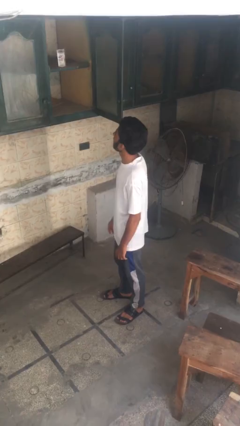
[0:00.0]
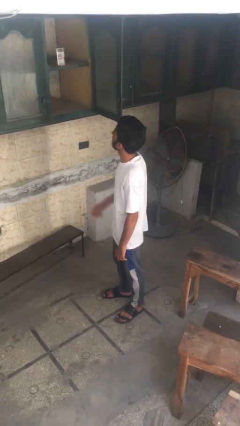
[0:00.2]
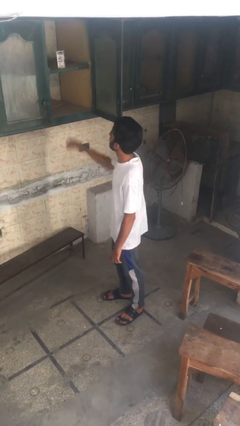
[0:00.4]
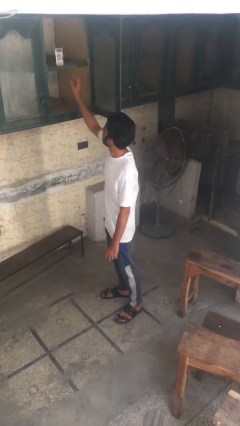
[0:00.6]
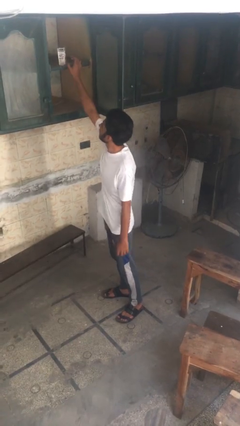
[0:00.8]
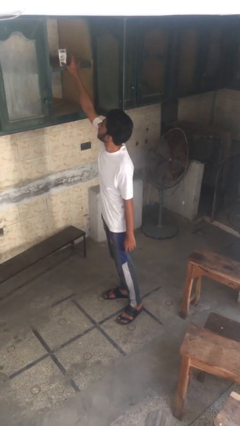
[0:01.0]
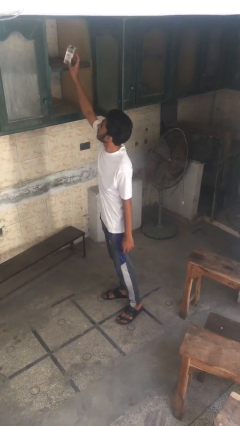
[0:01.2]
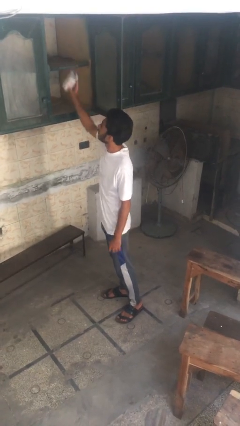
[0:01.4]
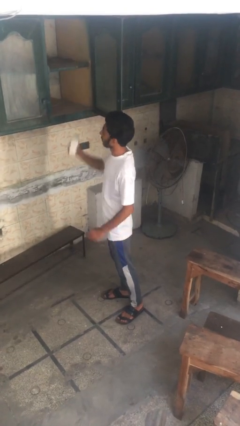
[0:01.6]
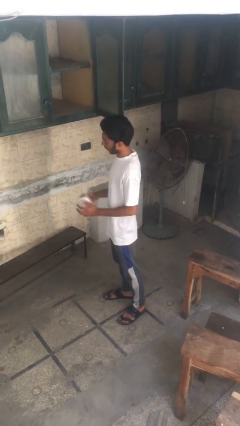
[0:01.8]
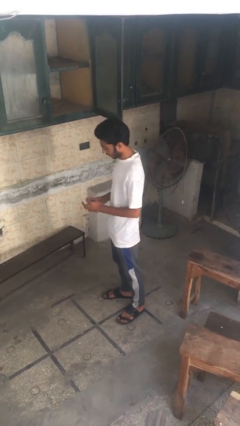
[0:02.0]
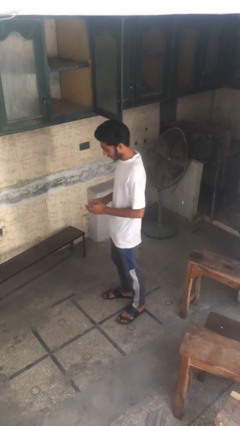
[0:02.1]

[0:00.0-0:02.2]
person takes object from cabinet

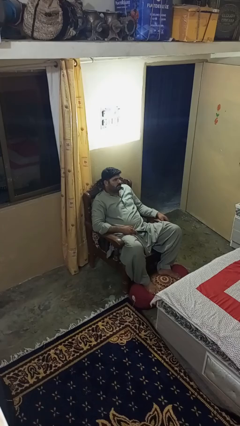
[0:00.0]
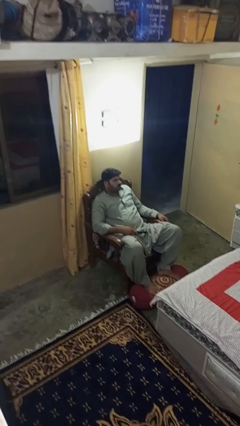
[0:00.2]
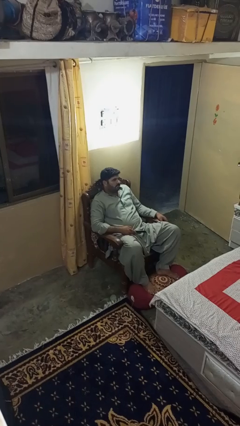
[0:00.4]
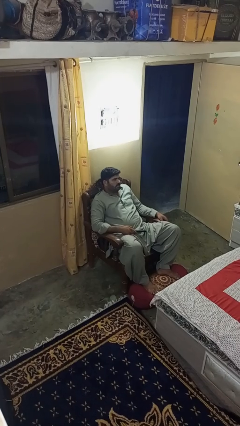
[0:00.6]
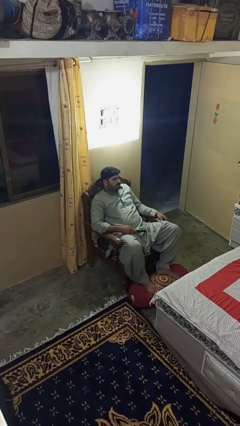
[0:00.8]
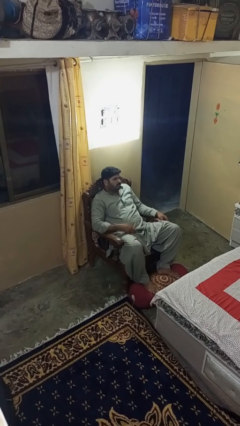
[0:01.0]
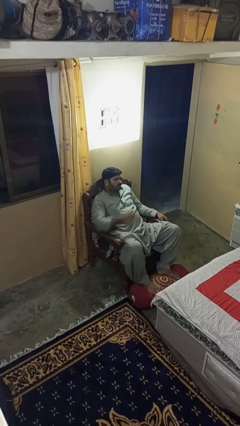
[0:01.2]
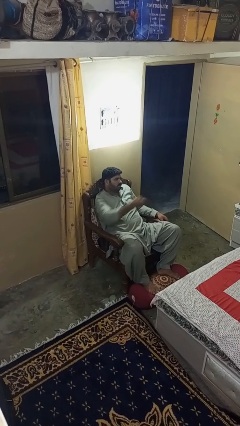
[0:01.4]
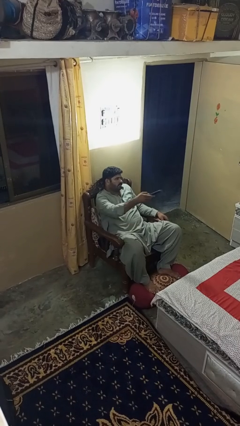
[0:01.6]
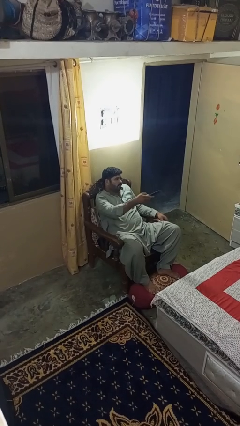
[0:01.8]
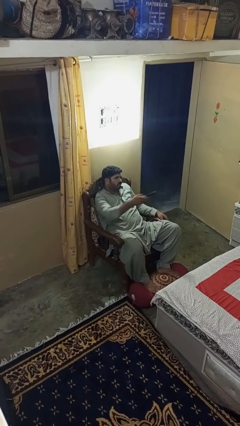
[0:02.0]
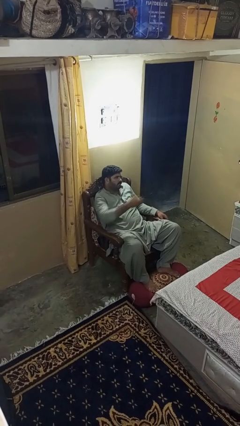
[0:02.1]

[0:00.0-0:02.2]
person uses television remote

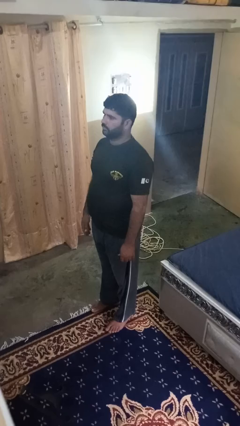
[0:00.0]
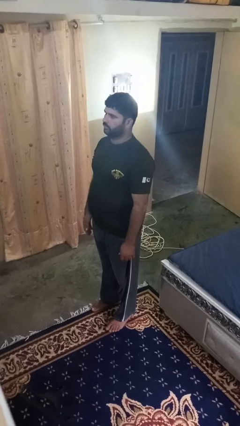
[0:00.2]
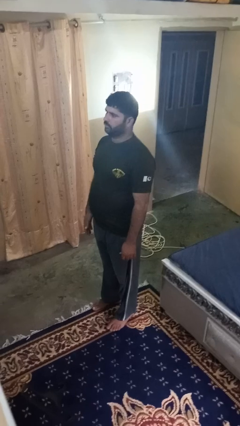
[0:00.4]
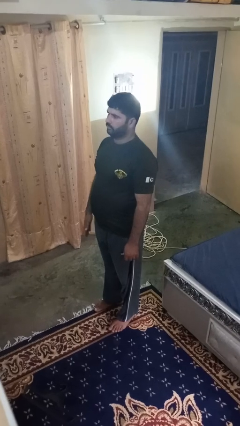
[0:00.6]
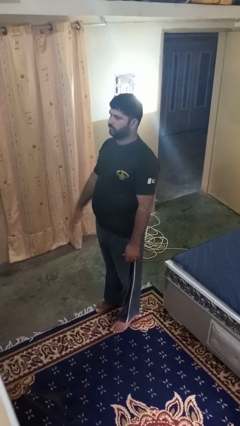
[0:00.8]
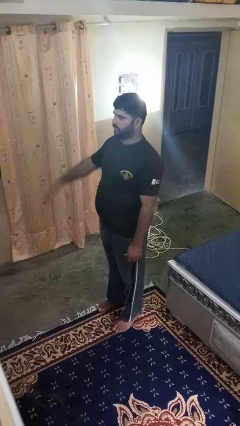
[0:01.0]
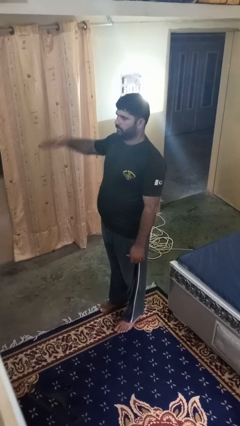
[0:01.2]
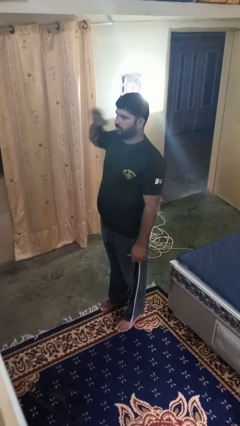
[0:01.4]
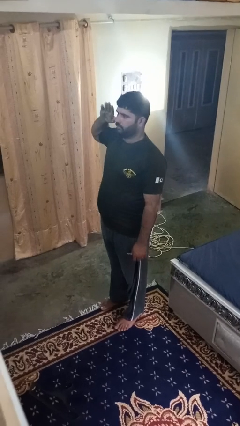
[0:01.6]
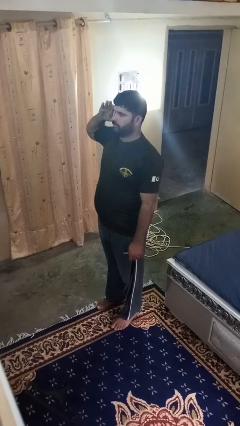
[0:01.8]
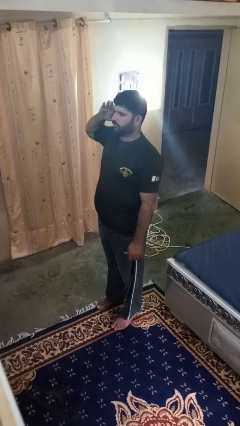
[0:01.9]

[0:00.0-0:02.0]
person salutes

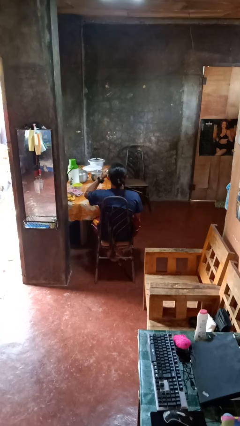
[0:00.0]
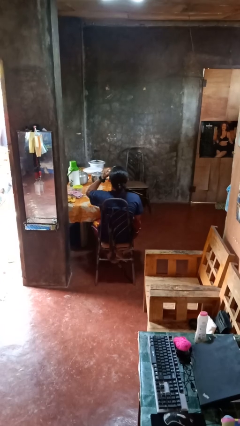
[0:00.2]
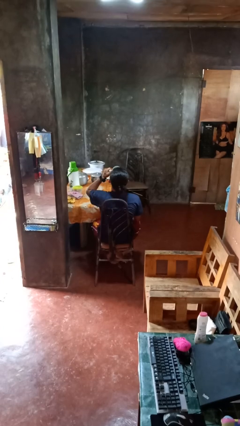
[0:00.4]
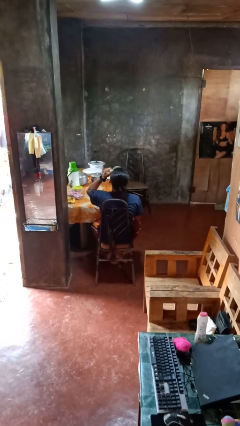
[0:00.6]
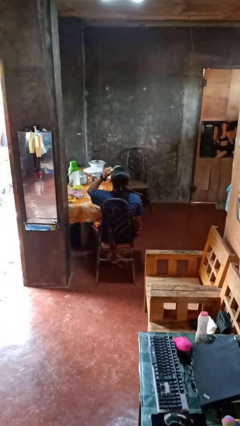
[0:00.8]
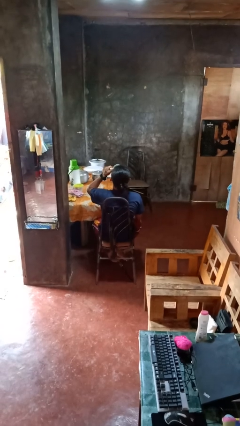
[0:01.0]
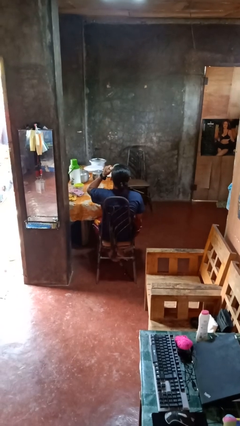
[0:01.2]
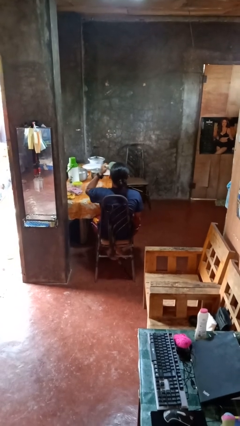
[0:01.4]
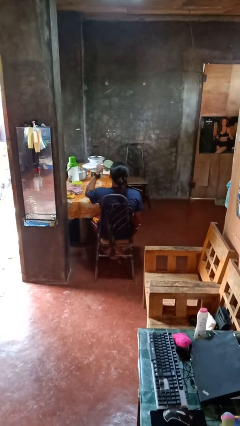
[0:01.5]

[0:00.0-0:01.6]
person drinks from mug

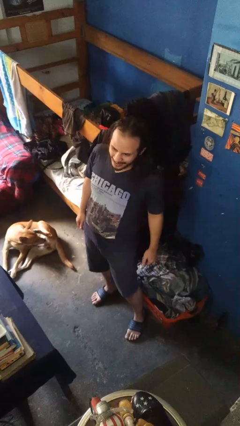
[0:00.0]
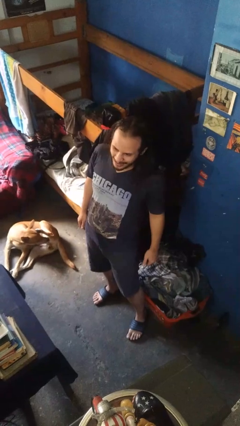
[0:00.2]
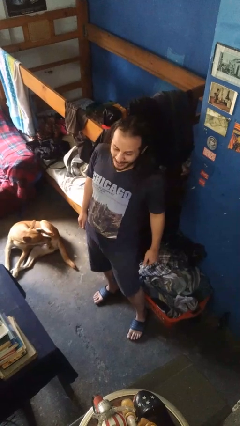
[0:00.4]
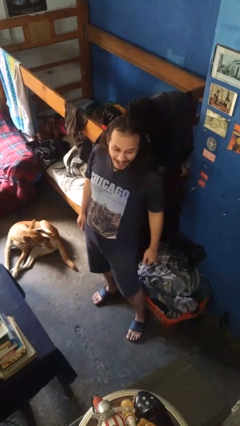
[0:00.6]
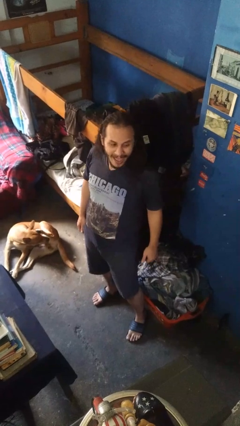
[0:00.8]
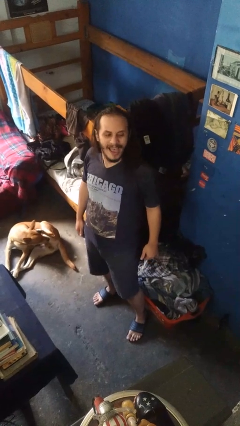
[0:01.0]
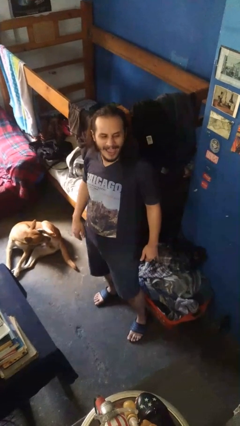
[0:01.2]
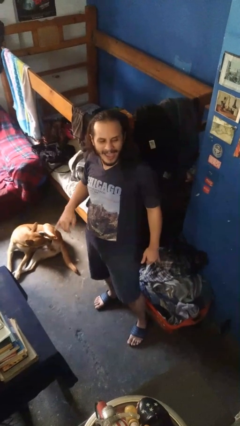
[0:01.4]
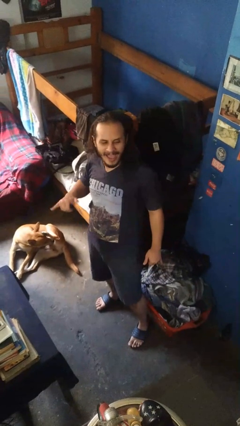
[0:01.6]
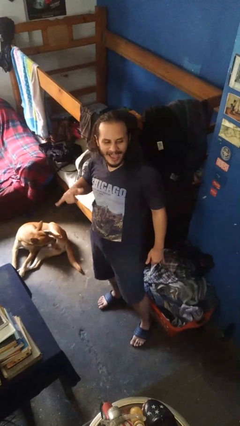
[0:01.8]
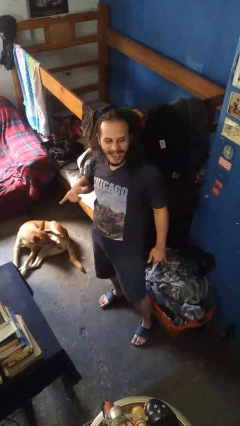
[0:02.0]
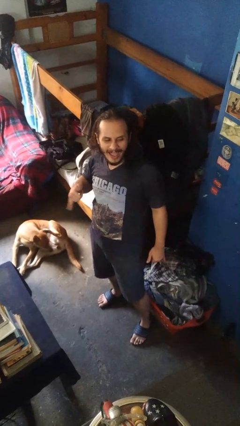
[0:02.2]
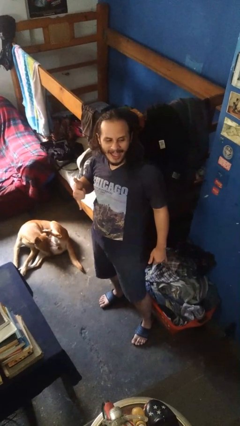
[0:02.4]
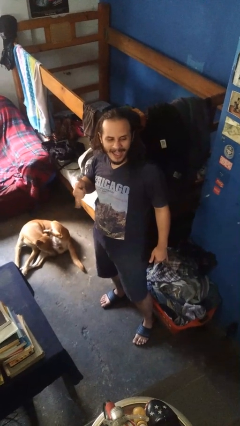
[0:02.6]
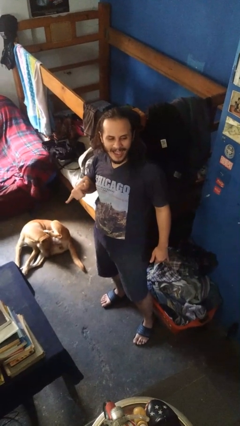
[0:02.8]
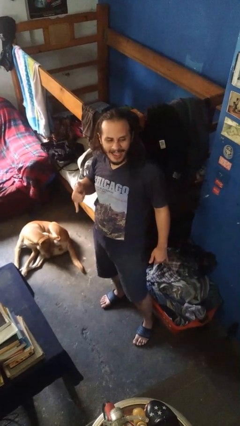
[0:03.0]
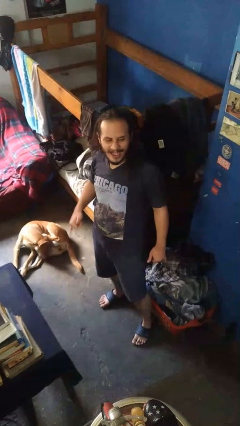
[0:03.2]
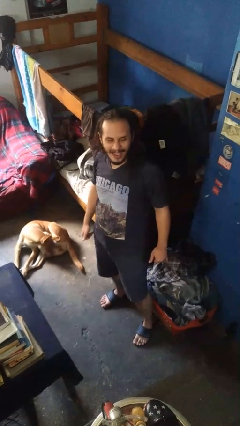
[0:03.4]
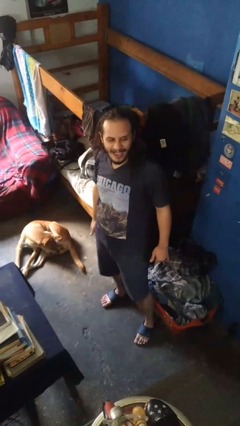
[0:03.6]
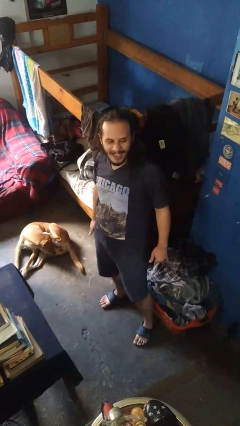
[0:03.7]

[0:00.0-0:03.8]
person gestures hang loose

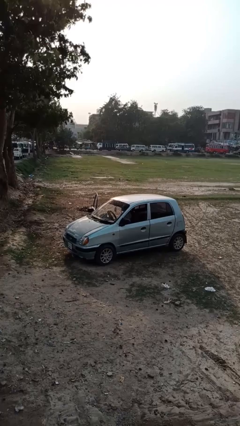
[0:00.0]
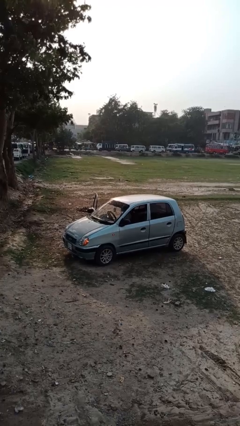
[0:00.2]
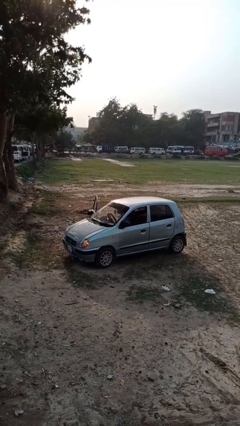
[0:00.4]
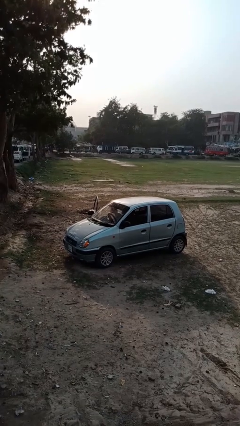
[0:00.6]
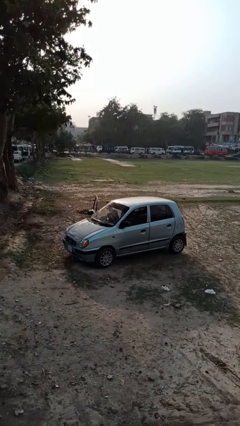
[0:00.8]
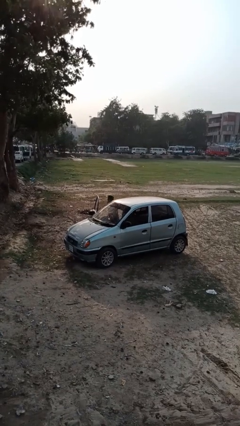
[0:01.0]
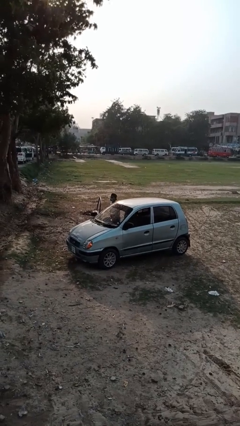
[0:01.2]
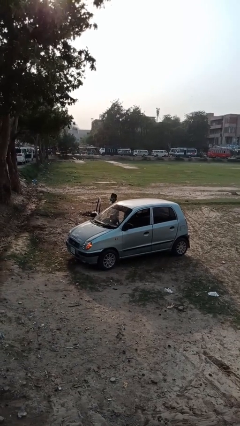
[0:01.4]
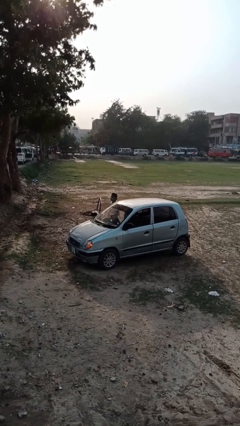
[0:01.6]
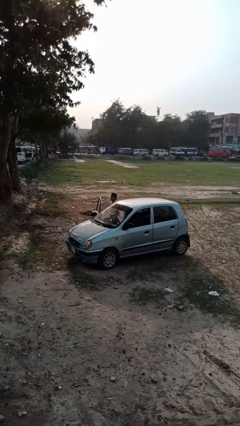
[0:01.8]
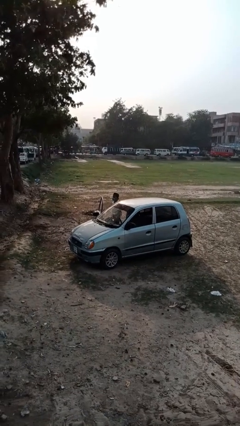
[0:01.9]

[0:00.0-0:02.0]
person exits car

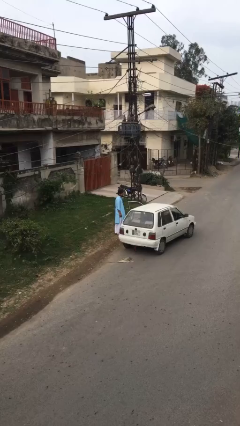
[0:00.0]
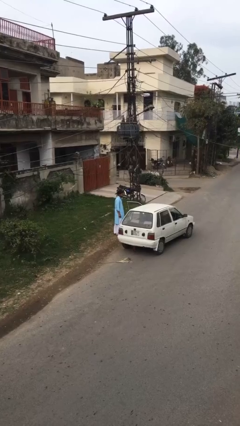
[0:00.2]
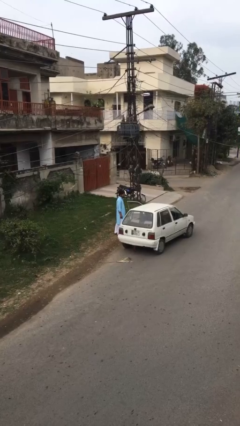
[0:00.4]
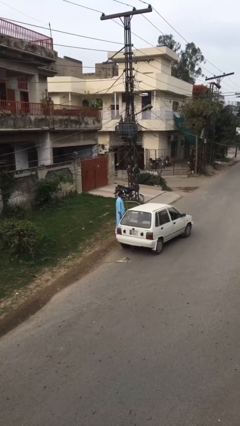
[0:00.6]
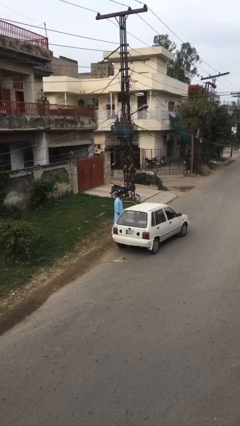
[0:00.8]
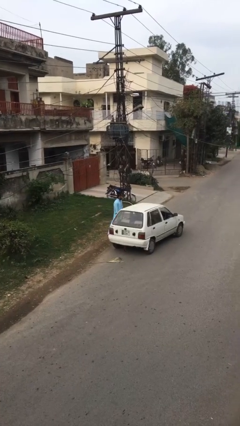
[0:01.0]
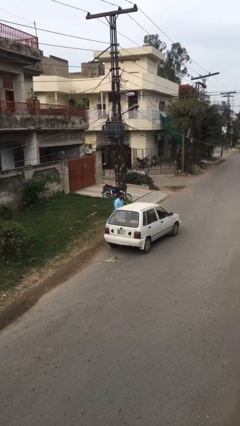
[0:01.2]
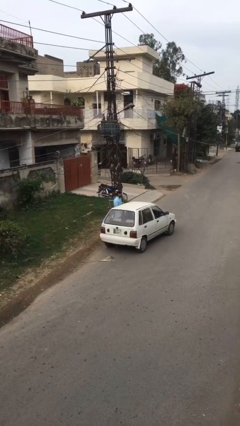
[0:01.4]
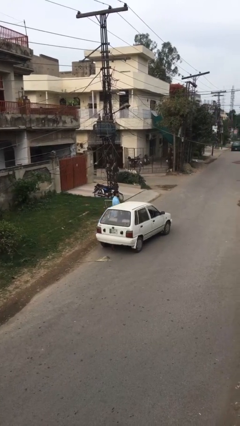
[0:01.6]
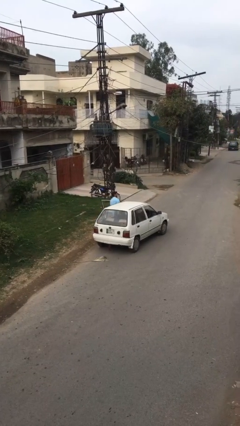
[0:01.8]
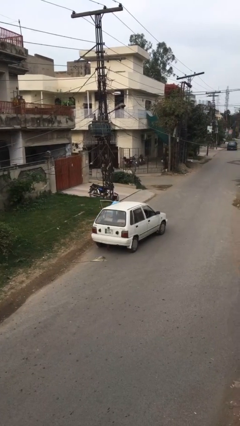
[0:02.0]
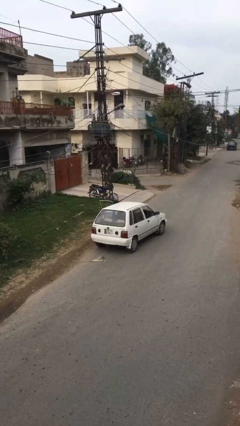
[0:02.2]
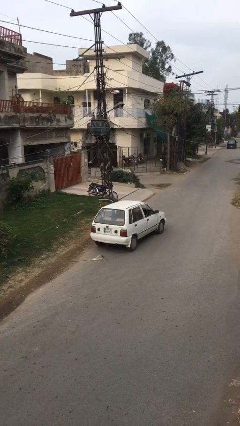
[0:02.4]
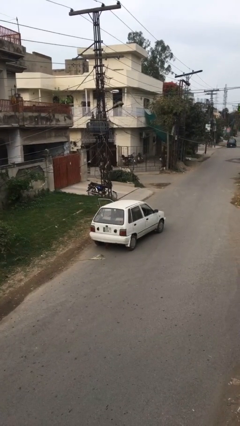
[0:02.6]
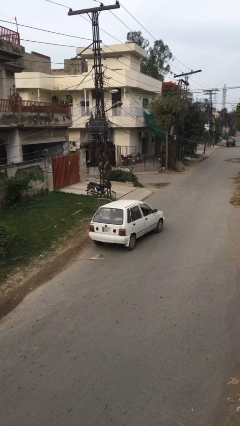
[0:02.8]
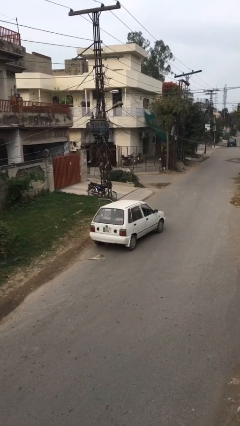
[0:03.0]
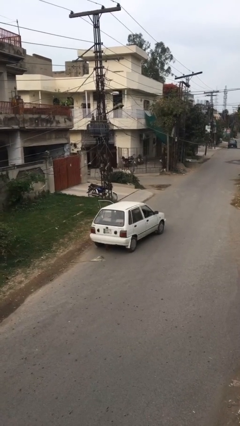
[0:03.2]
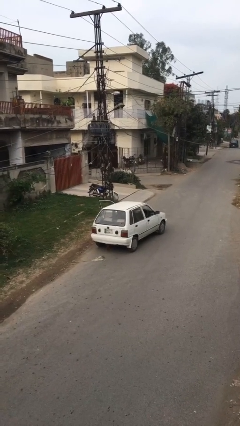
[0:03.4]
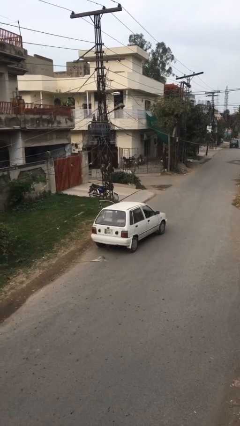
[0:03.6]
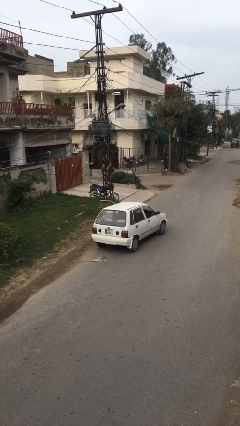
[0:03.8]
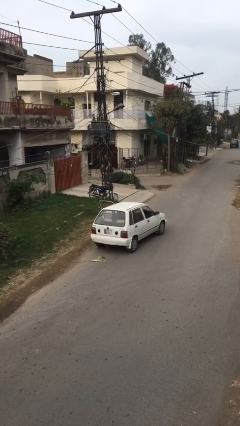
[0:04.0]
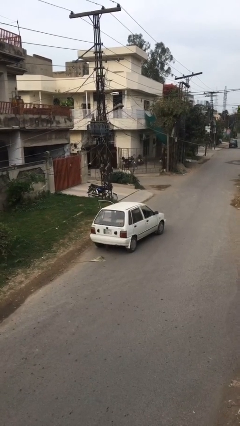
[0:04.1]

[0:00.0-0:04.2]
person enters car
